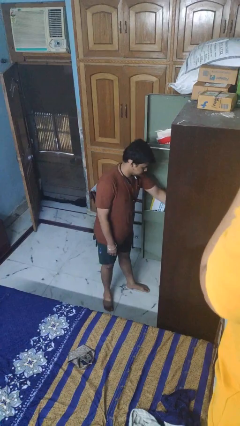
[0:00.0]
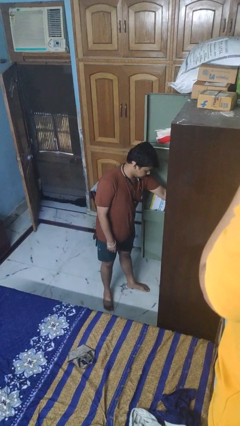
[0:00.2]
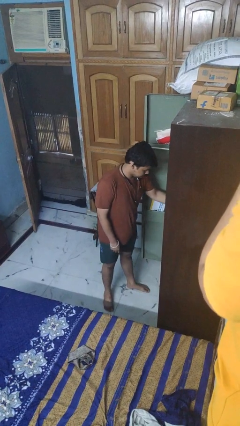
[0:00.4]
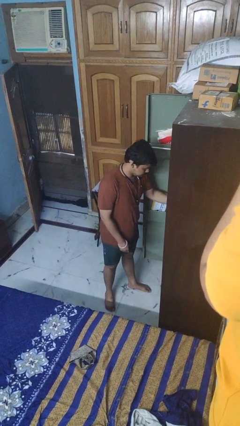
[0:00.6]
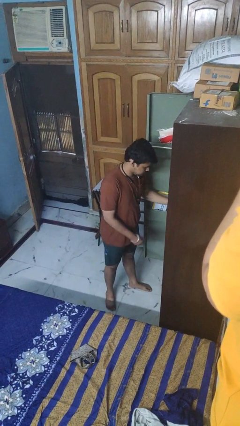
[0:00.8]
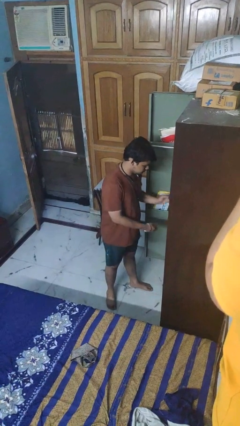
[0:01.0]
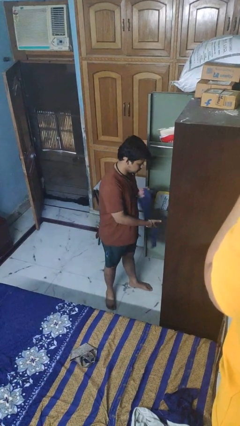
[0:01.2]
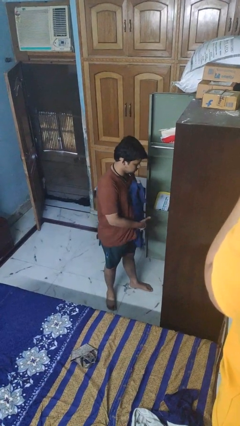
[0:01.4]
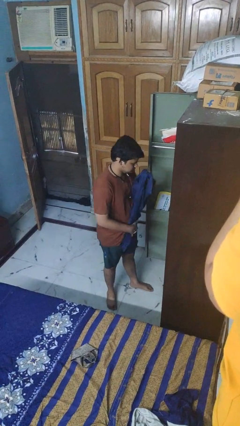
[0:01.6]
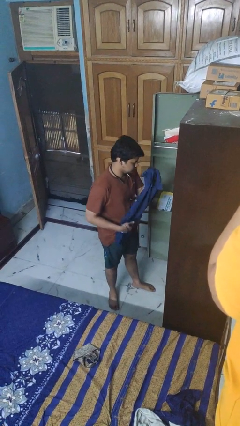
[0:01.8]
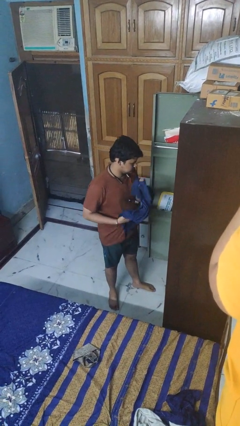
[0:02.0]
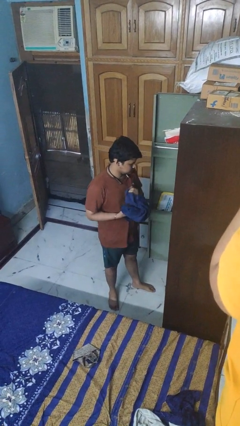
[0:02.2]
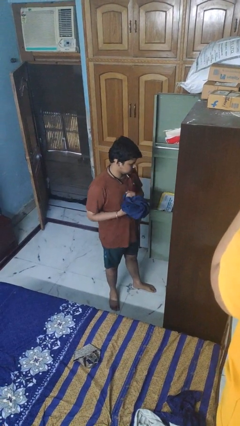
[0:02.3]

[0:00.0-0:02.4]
person takes clothes from dresser

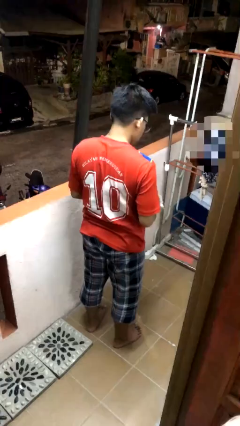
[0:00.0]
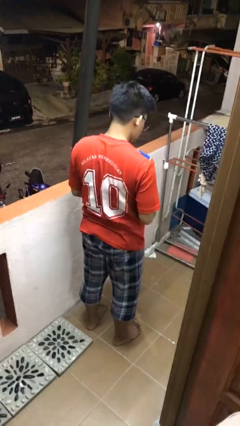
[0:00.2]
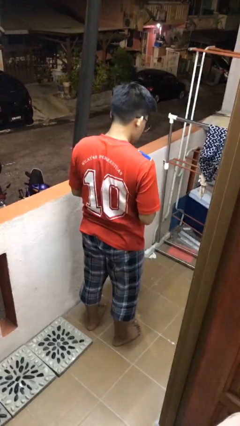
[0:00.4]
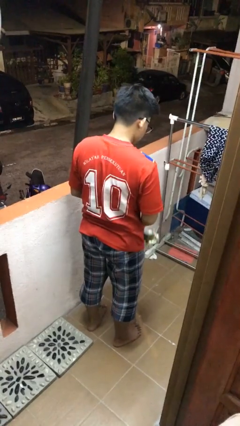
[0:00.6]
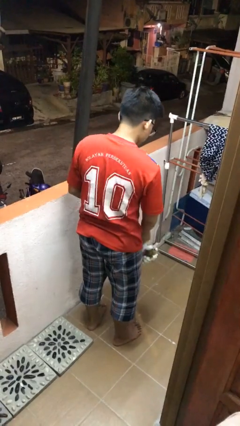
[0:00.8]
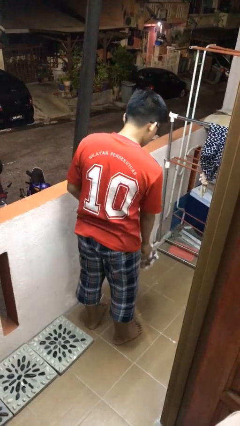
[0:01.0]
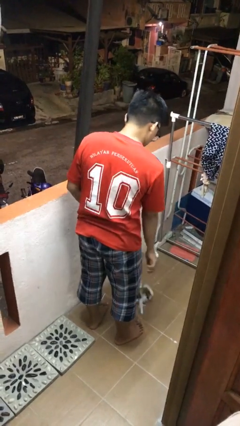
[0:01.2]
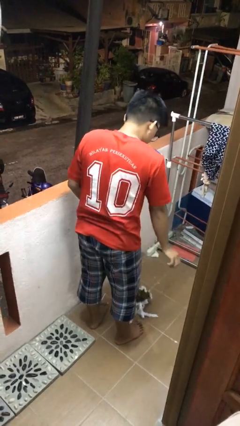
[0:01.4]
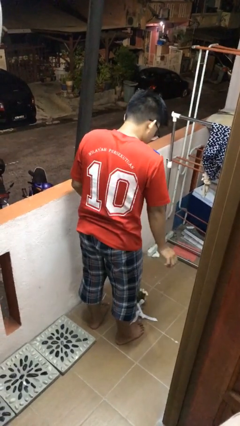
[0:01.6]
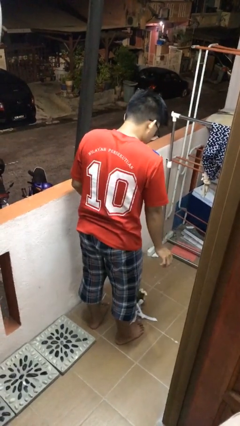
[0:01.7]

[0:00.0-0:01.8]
person drops object

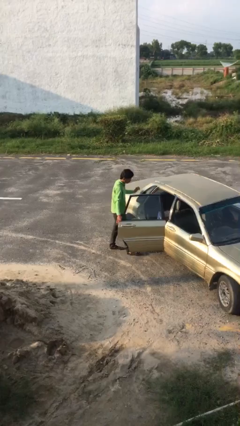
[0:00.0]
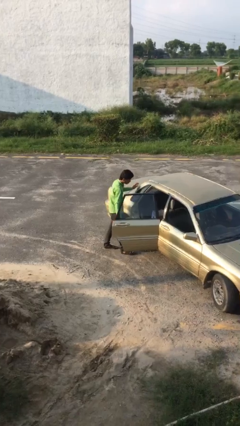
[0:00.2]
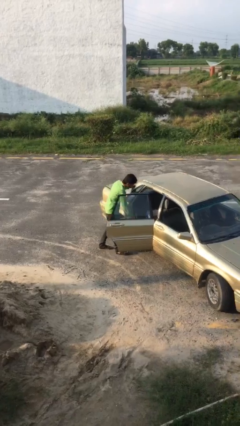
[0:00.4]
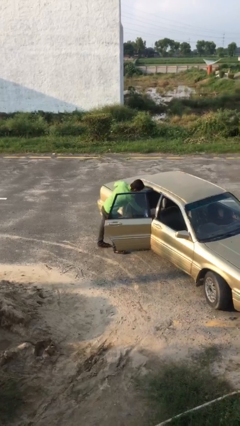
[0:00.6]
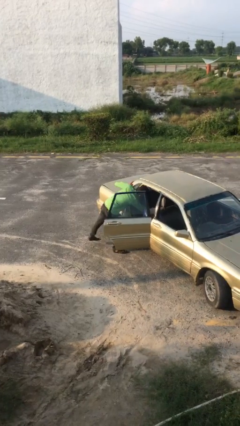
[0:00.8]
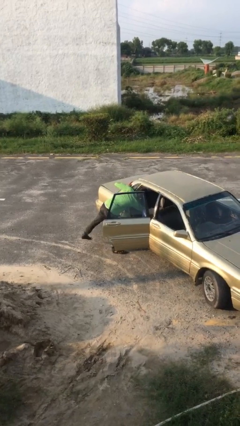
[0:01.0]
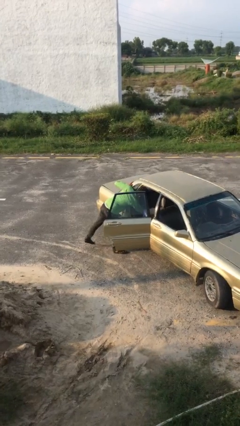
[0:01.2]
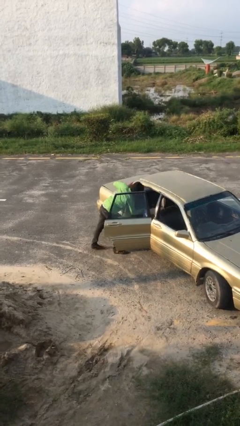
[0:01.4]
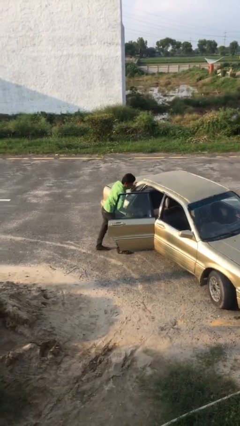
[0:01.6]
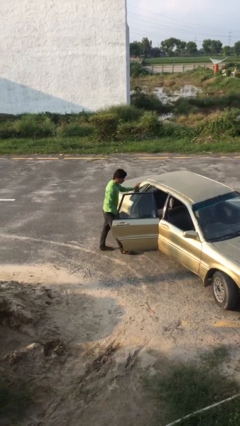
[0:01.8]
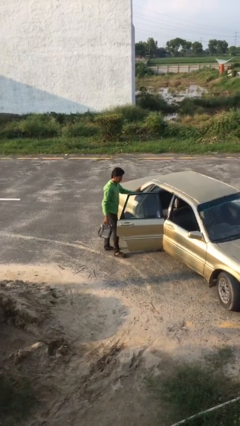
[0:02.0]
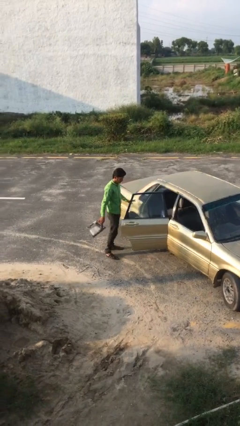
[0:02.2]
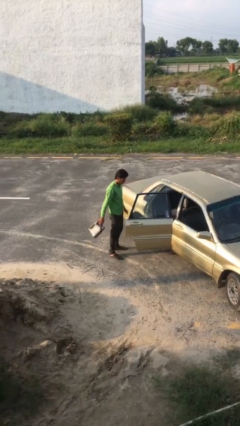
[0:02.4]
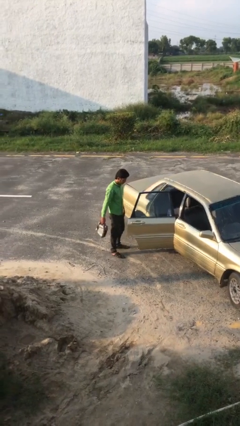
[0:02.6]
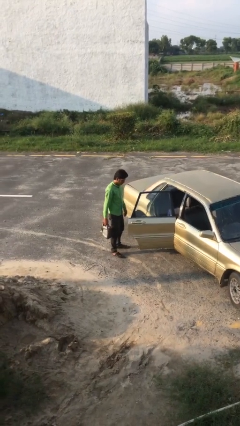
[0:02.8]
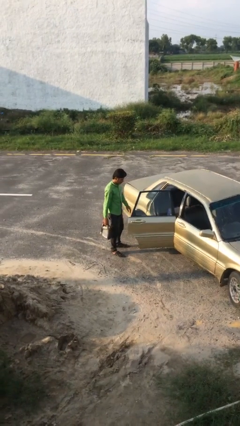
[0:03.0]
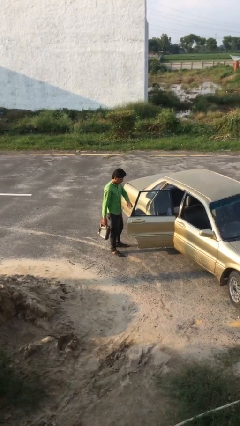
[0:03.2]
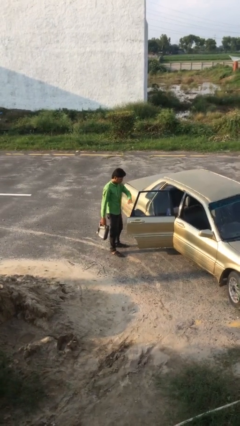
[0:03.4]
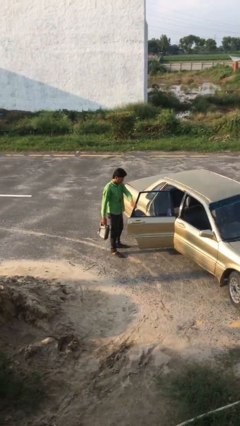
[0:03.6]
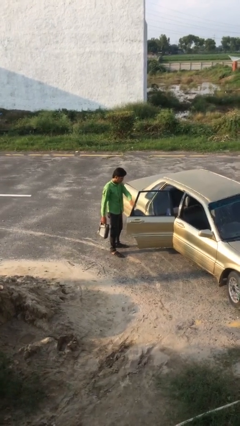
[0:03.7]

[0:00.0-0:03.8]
person unloads car

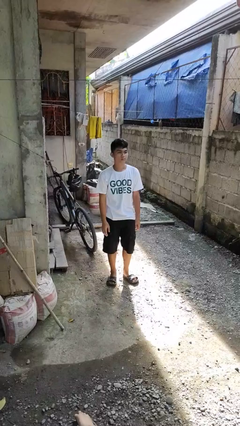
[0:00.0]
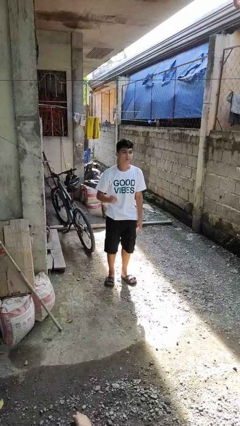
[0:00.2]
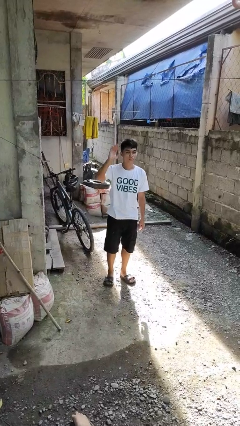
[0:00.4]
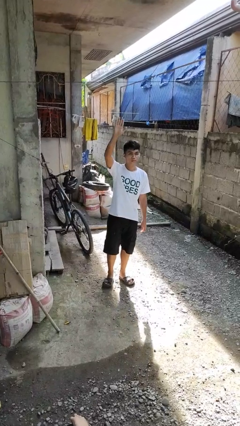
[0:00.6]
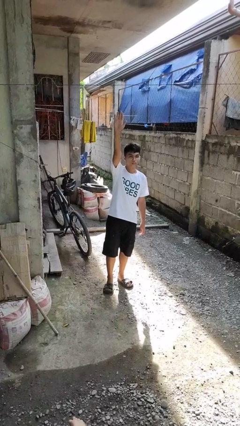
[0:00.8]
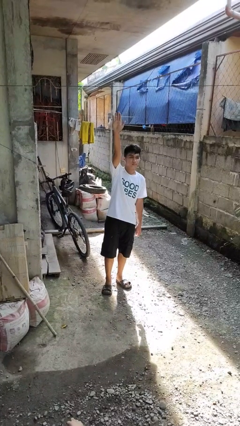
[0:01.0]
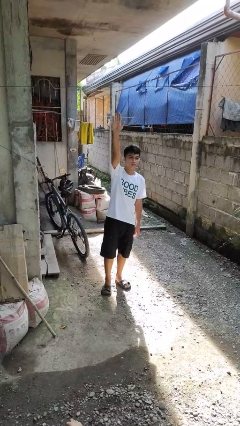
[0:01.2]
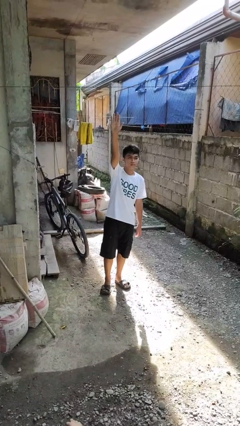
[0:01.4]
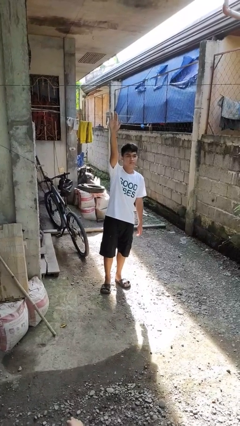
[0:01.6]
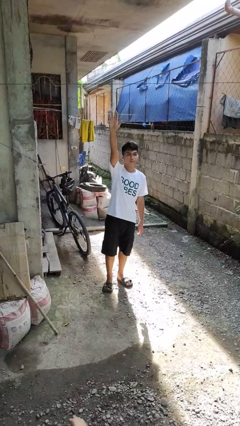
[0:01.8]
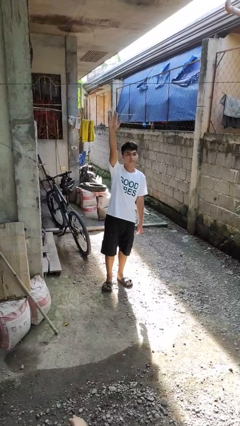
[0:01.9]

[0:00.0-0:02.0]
person gestures raise hand

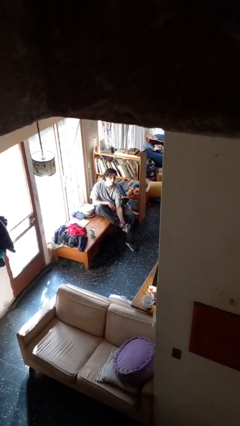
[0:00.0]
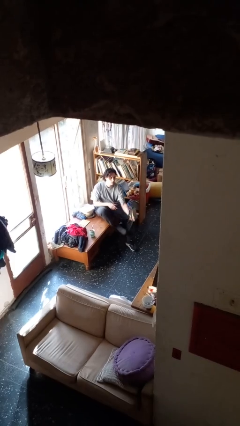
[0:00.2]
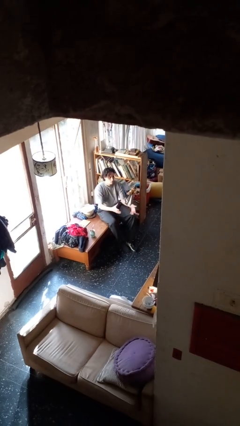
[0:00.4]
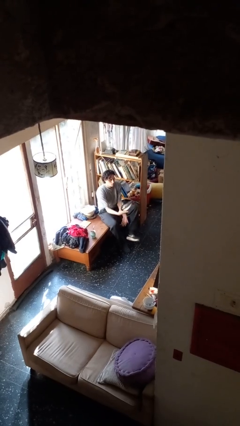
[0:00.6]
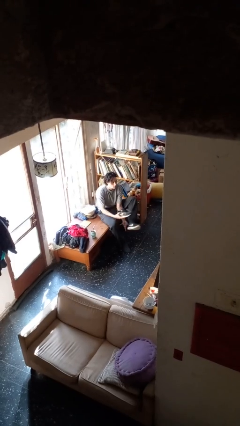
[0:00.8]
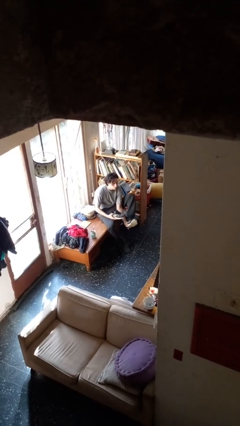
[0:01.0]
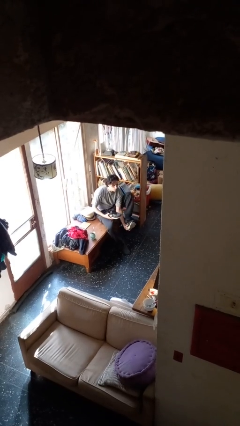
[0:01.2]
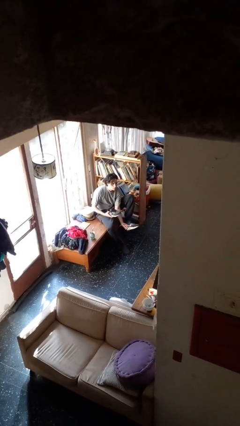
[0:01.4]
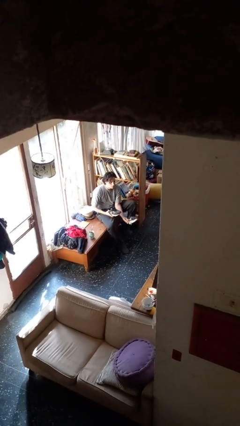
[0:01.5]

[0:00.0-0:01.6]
person takes off shoes

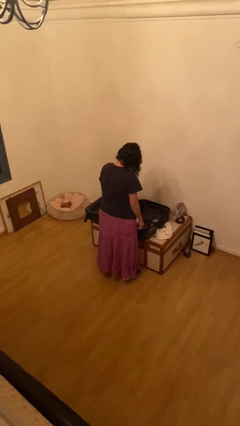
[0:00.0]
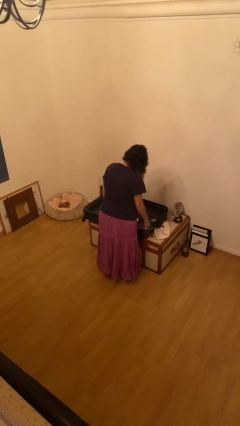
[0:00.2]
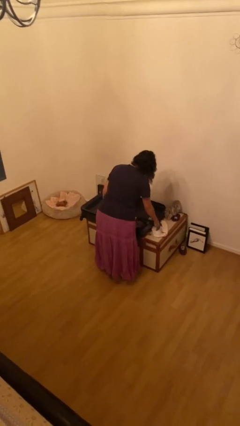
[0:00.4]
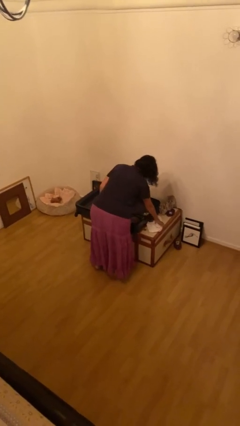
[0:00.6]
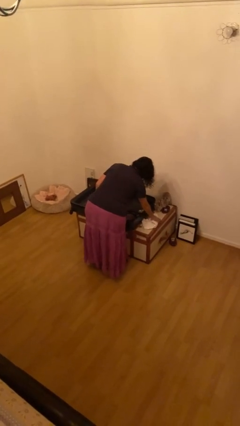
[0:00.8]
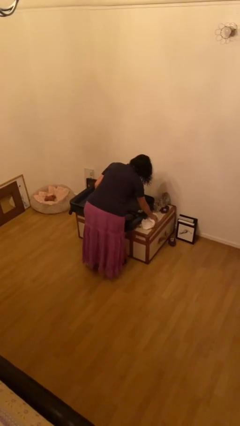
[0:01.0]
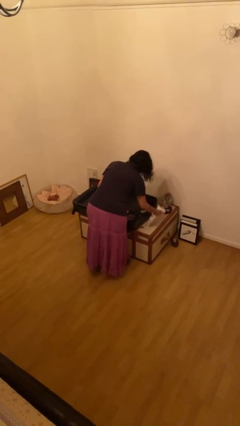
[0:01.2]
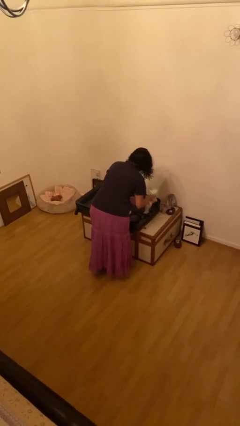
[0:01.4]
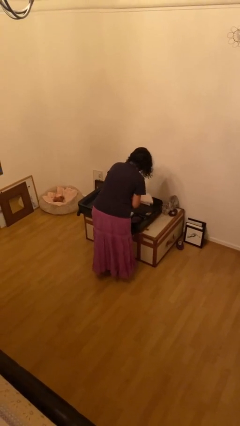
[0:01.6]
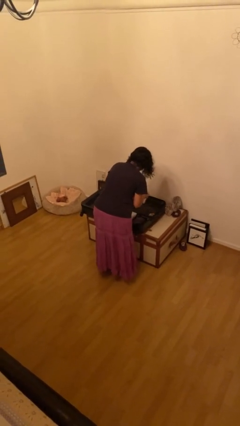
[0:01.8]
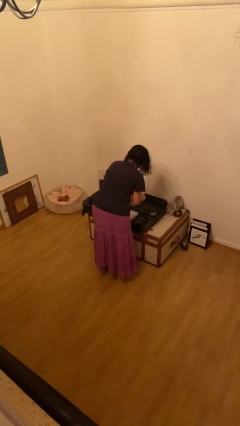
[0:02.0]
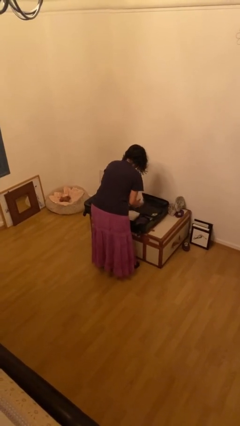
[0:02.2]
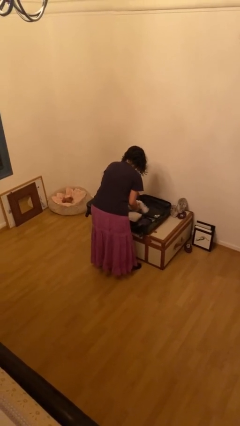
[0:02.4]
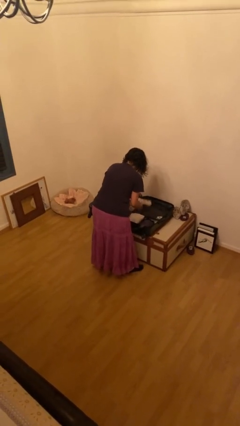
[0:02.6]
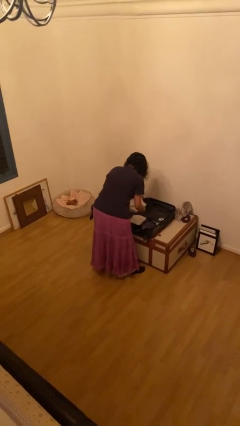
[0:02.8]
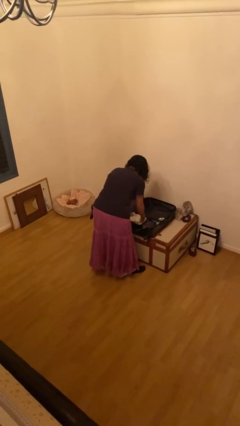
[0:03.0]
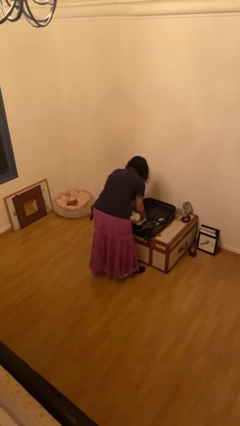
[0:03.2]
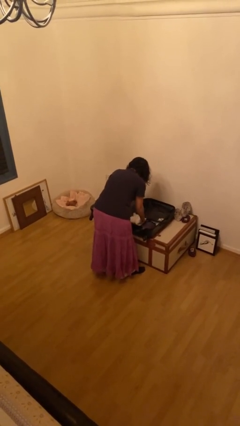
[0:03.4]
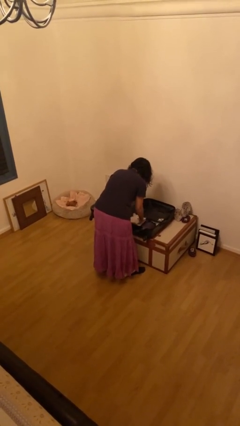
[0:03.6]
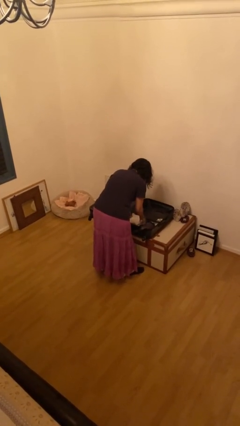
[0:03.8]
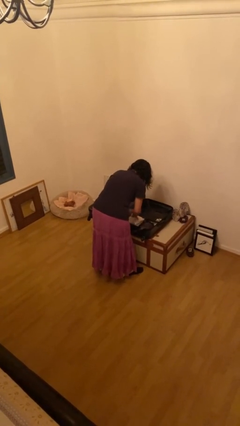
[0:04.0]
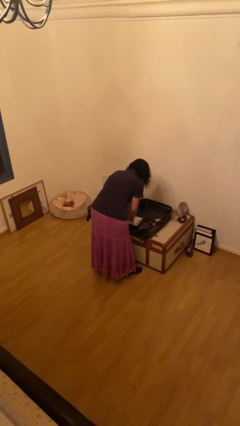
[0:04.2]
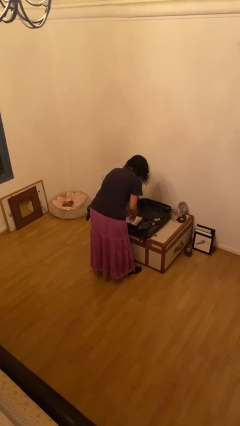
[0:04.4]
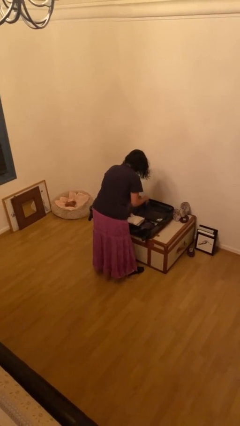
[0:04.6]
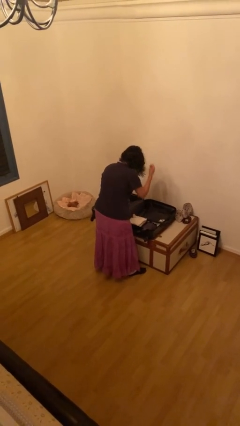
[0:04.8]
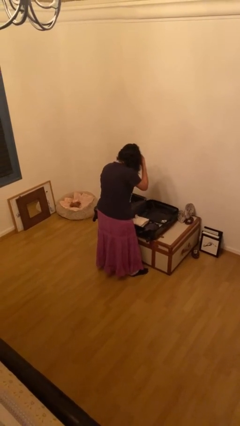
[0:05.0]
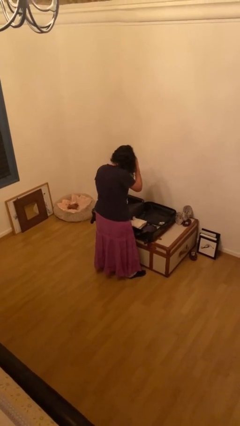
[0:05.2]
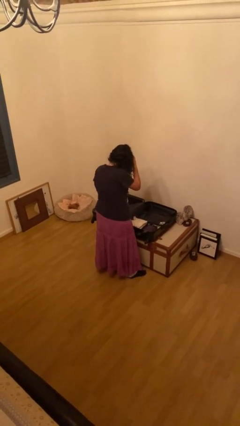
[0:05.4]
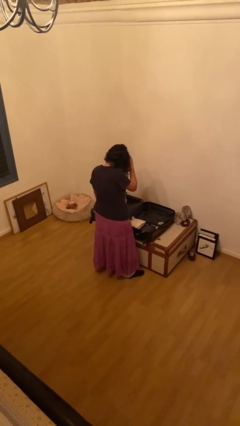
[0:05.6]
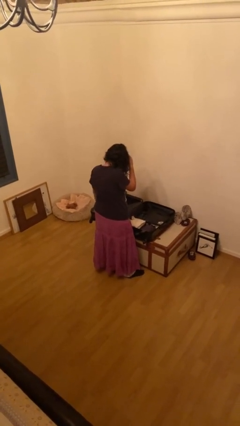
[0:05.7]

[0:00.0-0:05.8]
person unloads clothes from suitcase
